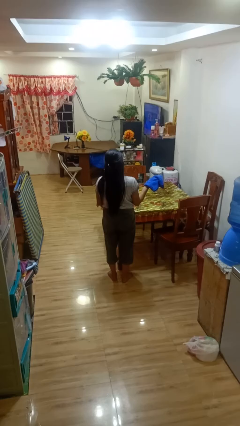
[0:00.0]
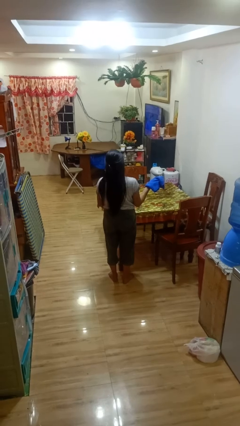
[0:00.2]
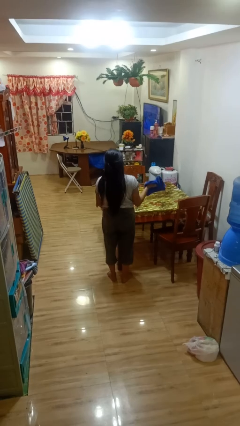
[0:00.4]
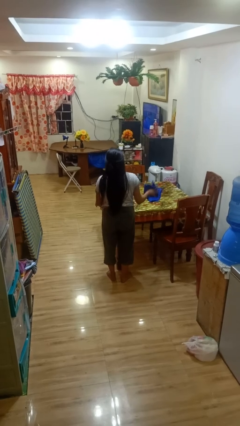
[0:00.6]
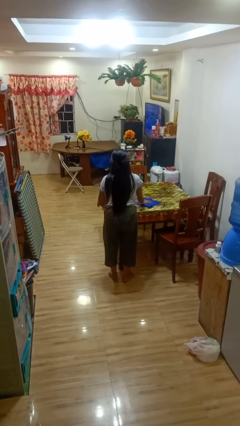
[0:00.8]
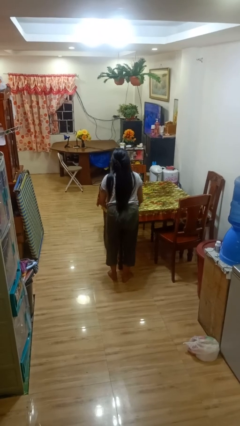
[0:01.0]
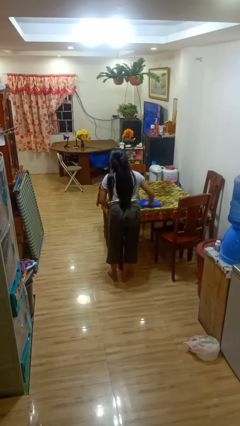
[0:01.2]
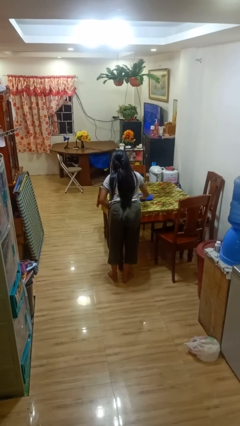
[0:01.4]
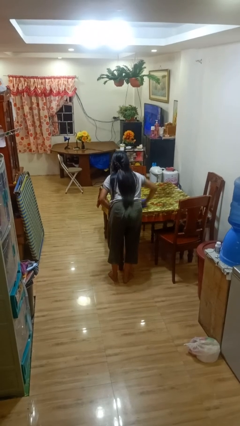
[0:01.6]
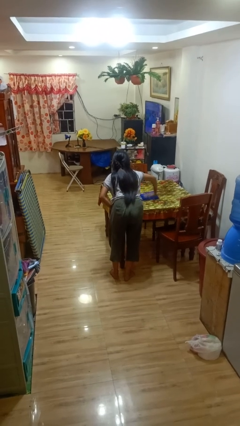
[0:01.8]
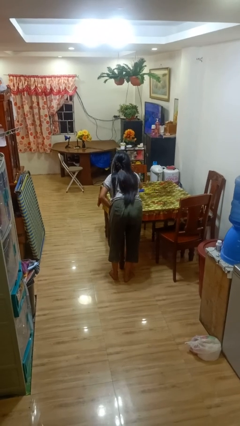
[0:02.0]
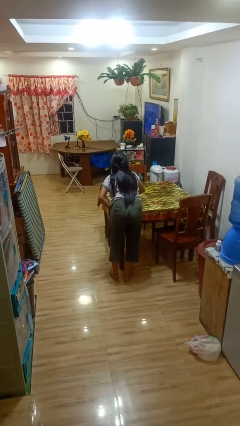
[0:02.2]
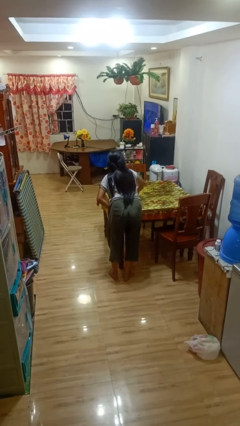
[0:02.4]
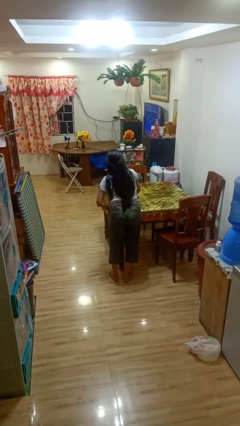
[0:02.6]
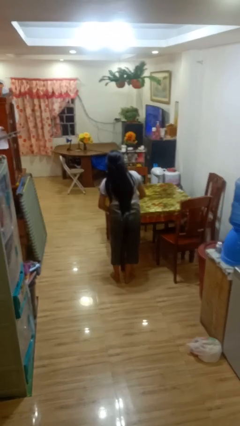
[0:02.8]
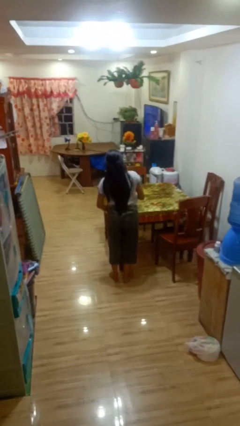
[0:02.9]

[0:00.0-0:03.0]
person cleans table with rag

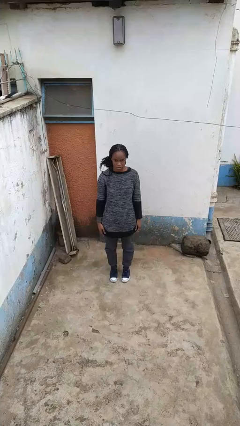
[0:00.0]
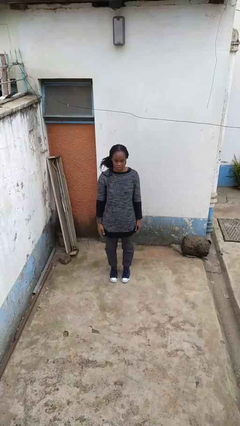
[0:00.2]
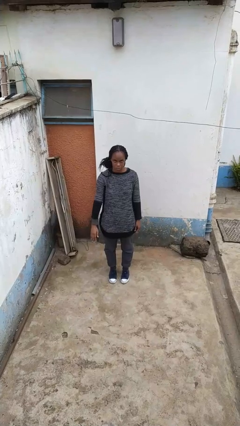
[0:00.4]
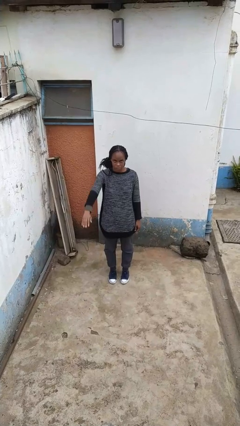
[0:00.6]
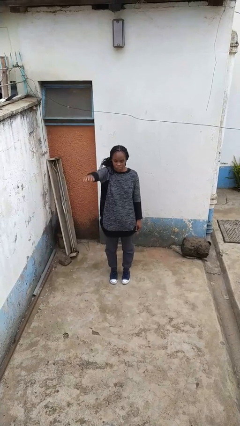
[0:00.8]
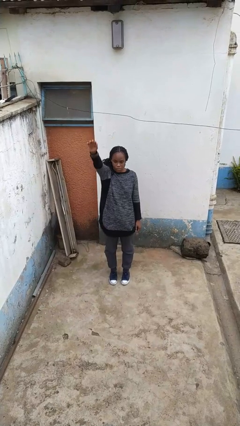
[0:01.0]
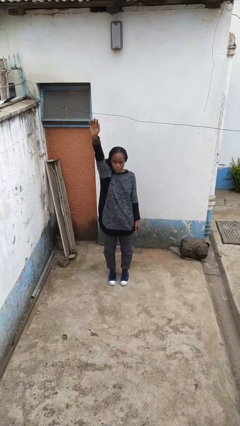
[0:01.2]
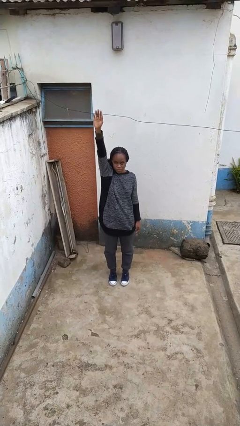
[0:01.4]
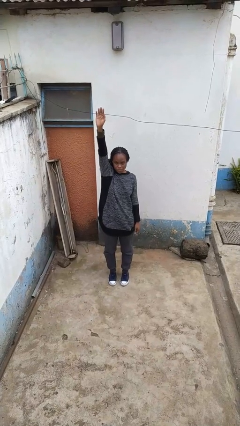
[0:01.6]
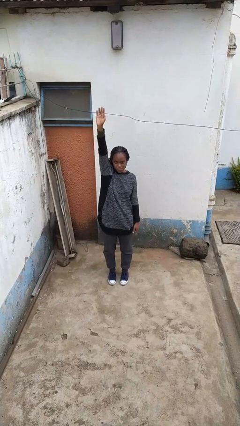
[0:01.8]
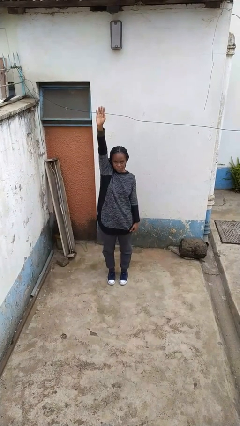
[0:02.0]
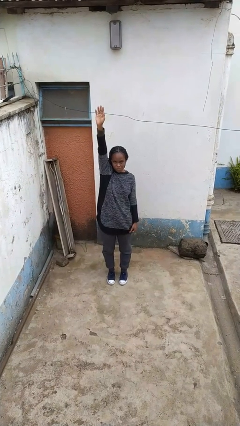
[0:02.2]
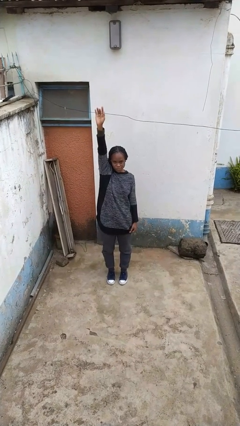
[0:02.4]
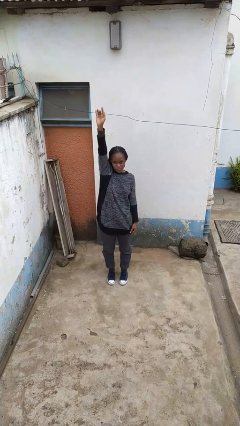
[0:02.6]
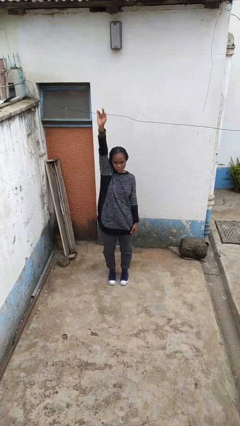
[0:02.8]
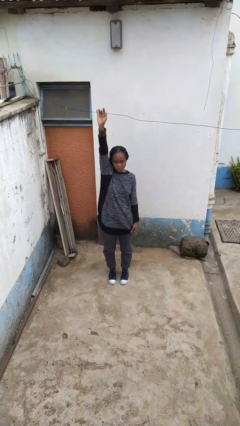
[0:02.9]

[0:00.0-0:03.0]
person gestures raise hand

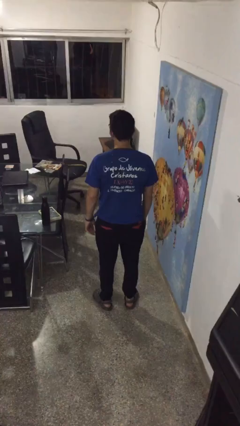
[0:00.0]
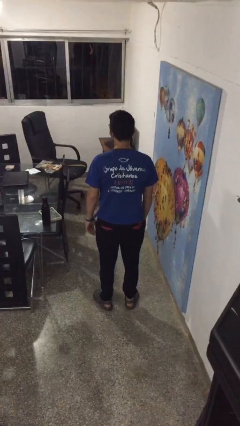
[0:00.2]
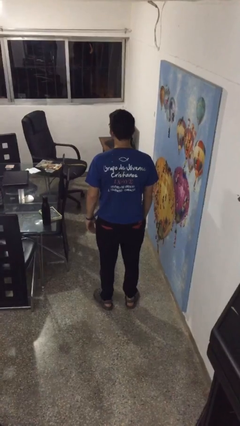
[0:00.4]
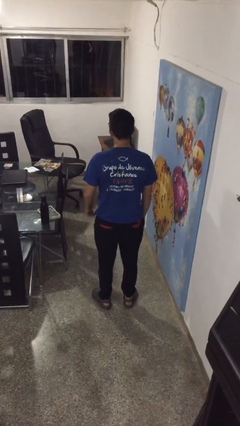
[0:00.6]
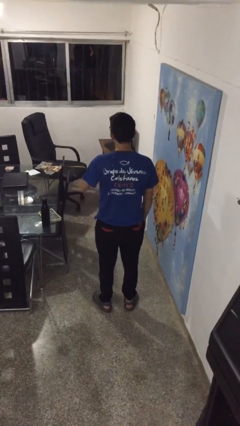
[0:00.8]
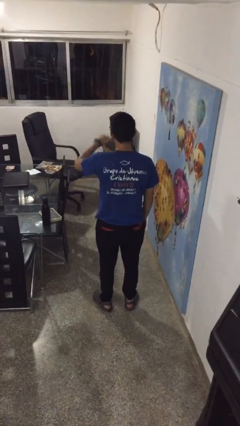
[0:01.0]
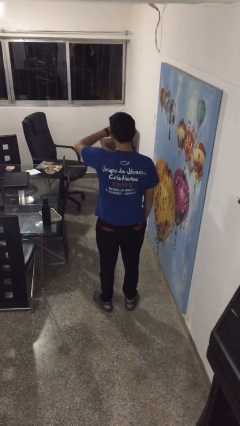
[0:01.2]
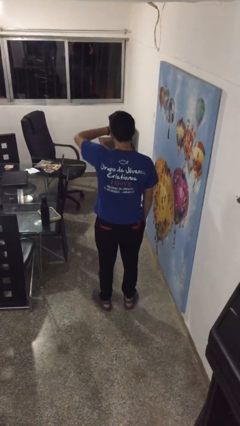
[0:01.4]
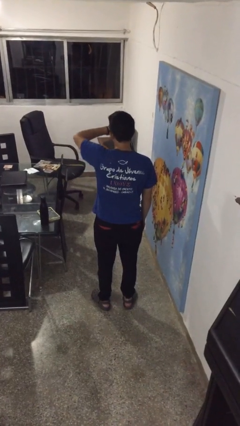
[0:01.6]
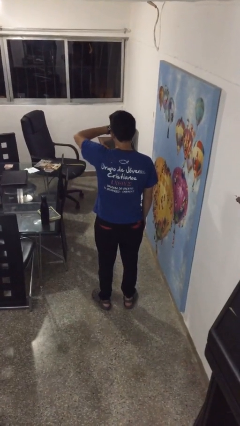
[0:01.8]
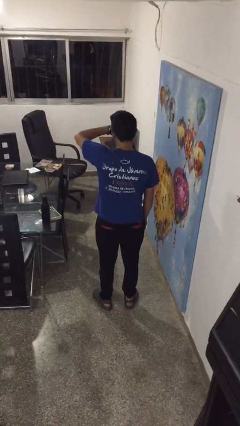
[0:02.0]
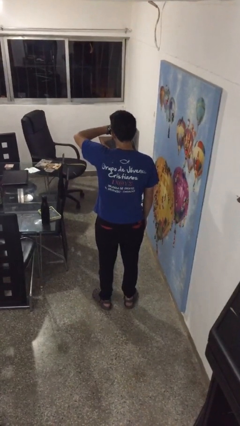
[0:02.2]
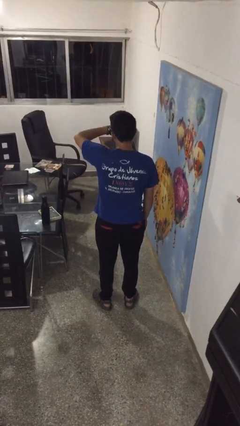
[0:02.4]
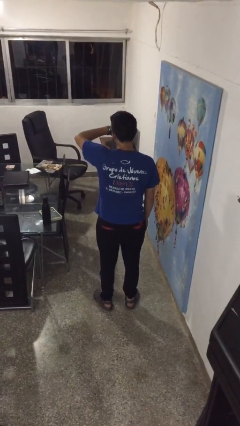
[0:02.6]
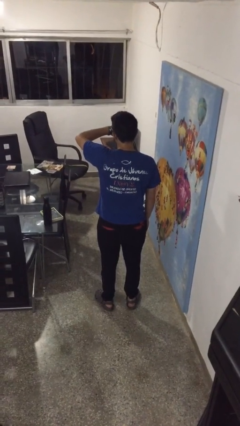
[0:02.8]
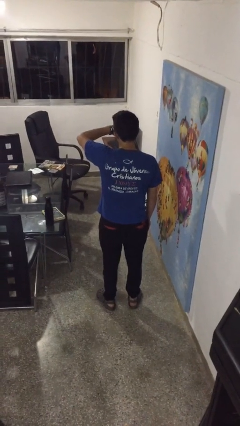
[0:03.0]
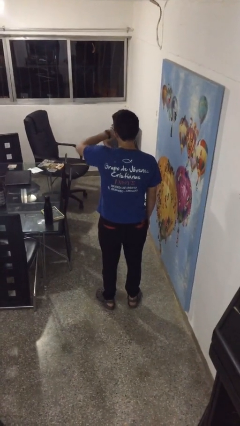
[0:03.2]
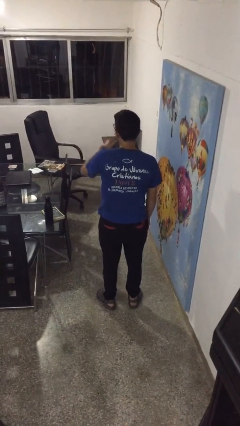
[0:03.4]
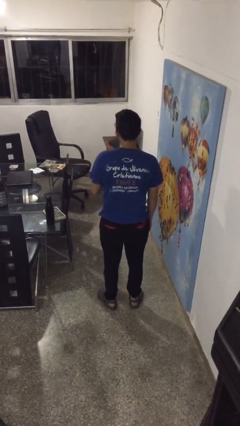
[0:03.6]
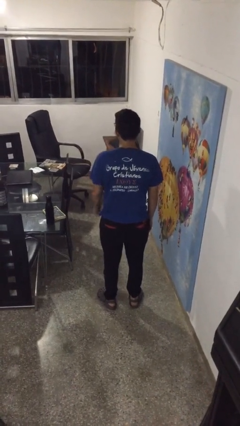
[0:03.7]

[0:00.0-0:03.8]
person looks at wristwatch

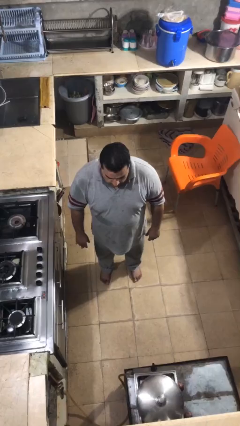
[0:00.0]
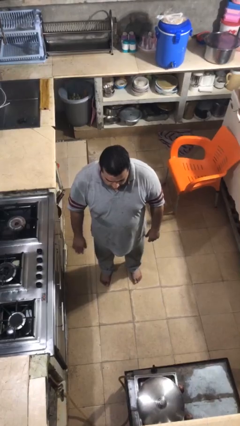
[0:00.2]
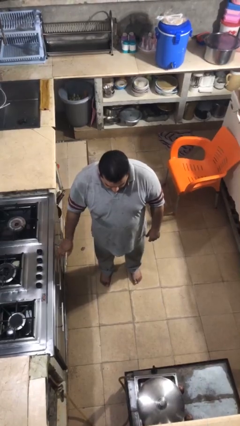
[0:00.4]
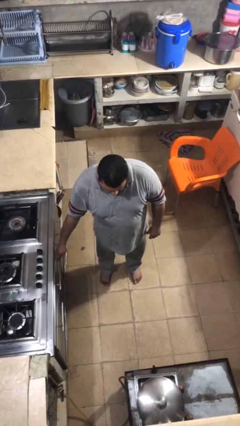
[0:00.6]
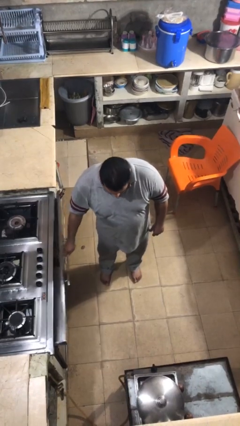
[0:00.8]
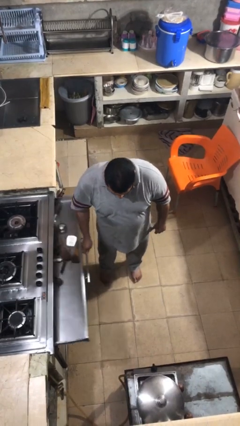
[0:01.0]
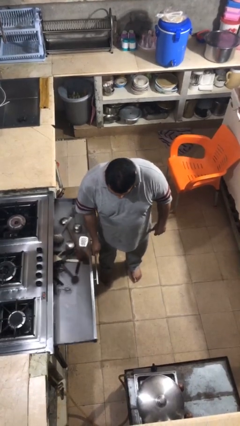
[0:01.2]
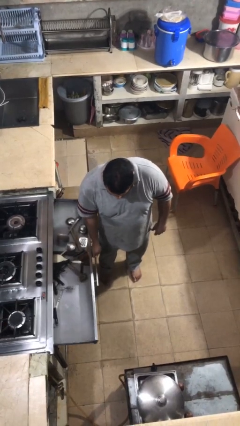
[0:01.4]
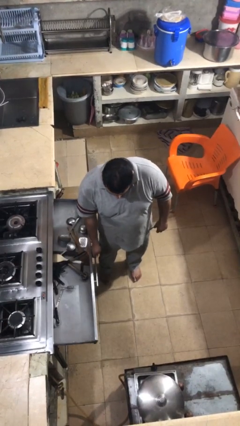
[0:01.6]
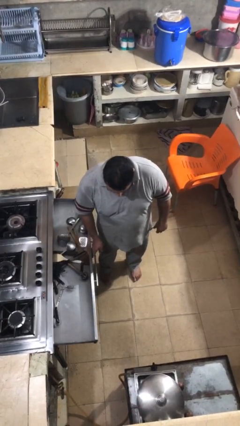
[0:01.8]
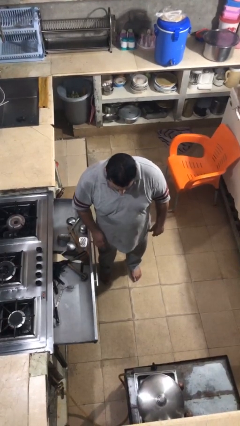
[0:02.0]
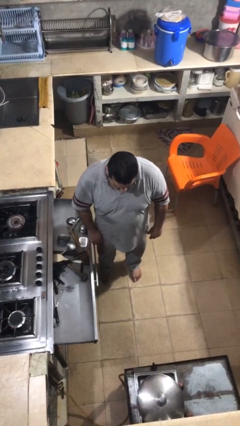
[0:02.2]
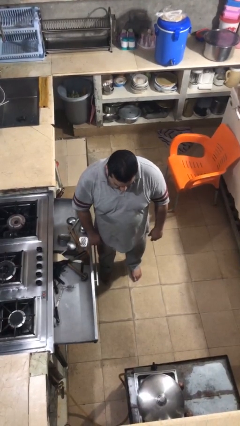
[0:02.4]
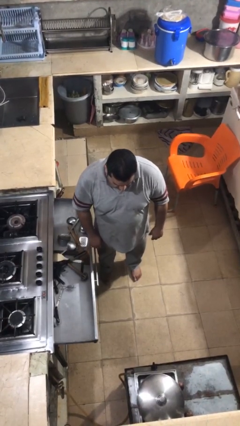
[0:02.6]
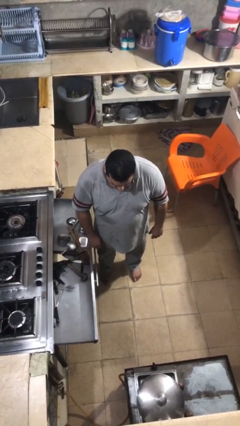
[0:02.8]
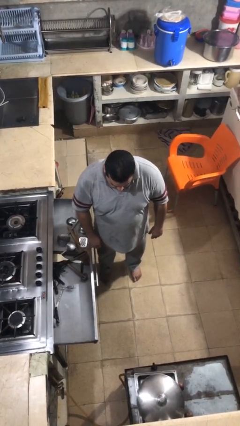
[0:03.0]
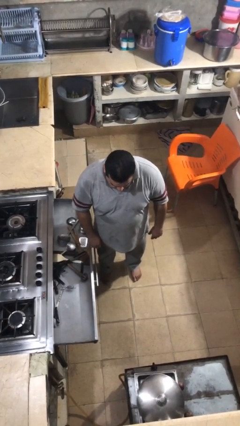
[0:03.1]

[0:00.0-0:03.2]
person opens kitchen drawer

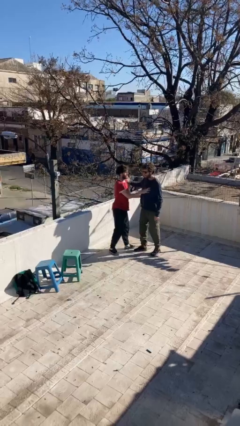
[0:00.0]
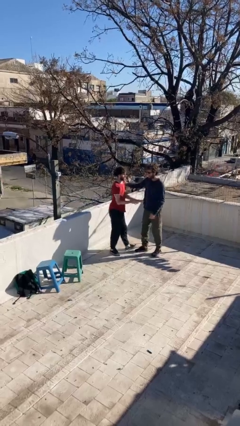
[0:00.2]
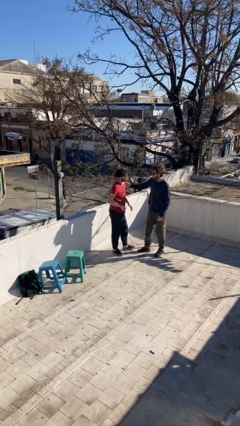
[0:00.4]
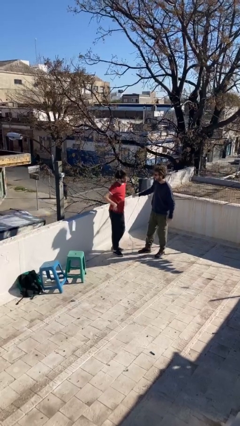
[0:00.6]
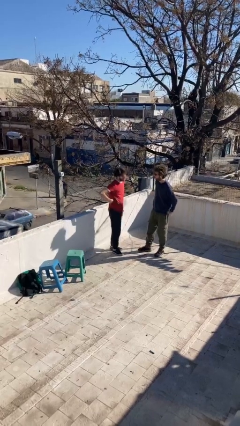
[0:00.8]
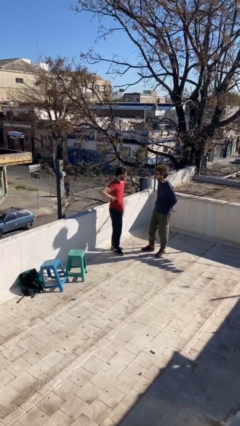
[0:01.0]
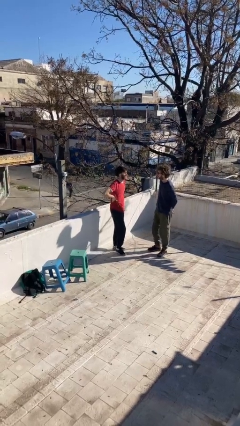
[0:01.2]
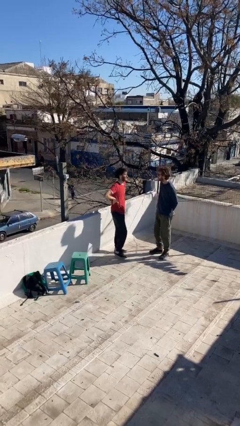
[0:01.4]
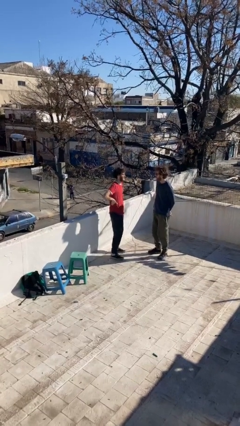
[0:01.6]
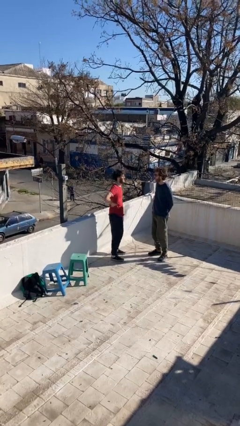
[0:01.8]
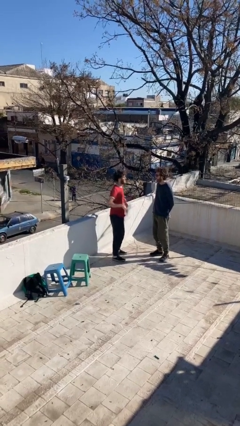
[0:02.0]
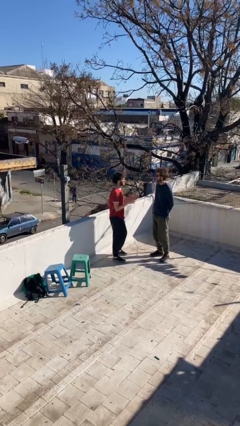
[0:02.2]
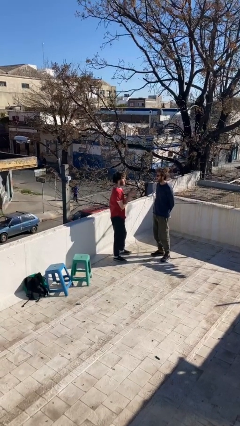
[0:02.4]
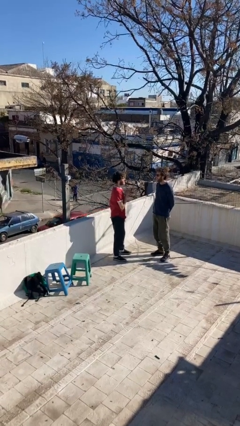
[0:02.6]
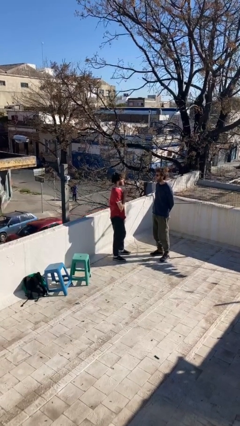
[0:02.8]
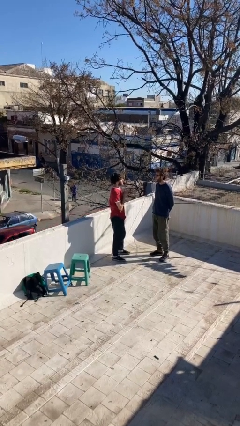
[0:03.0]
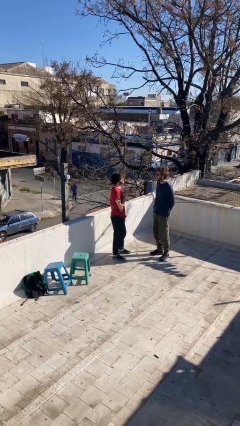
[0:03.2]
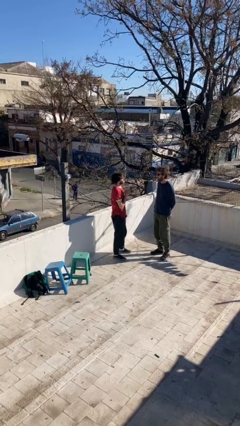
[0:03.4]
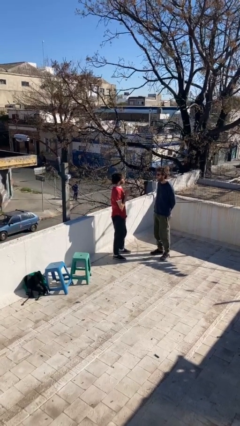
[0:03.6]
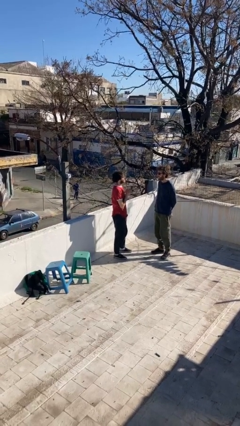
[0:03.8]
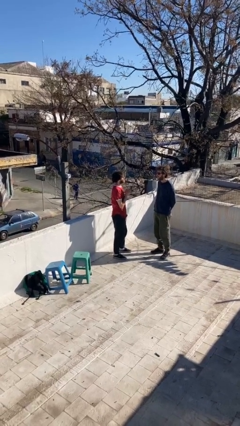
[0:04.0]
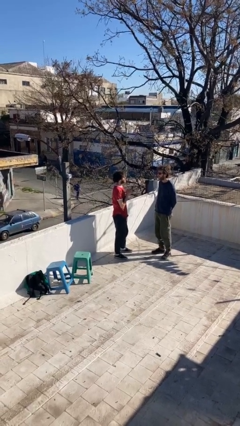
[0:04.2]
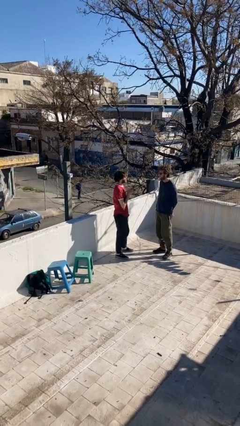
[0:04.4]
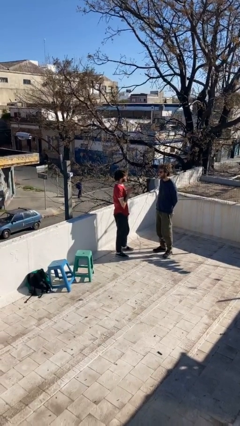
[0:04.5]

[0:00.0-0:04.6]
person talks to person
